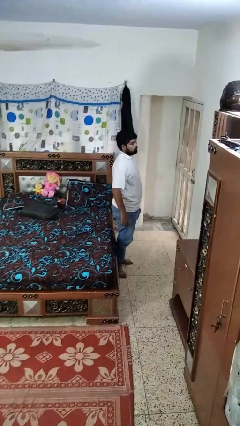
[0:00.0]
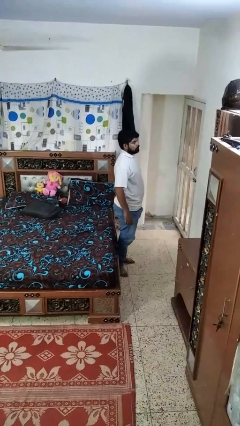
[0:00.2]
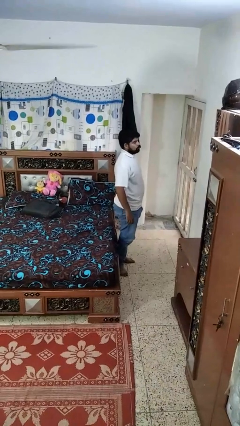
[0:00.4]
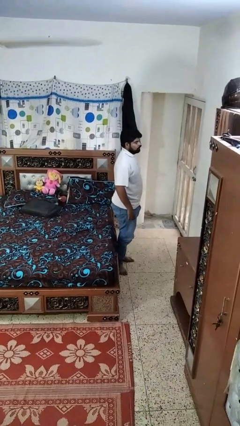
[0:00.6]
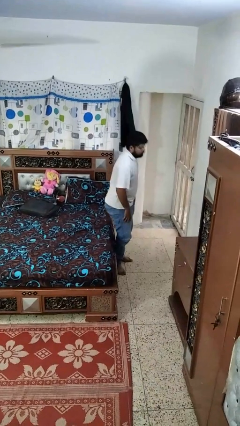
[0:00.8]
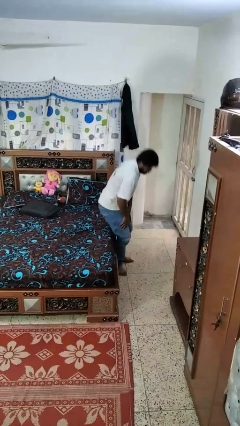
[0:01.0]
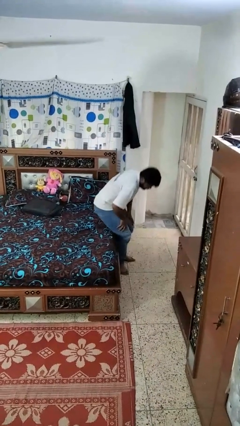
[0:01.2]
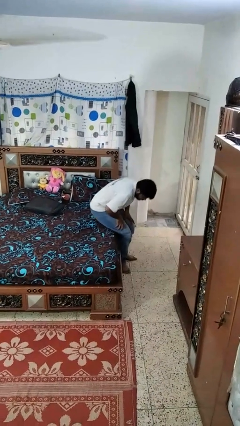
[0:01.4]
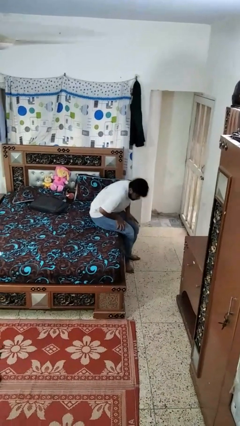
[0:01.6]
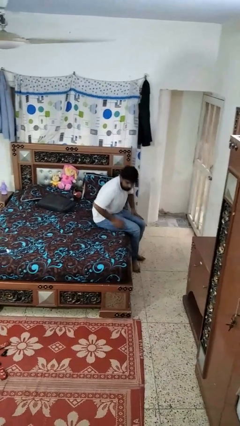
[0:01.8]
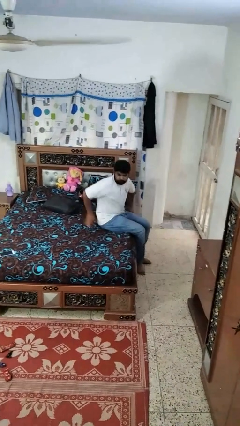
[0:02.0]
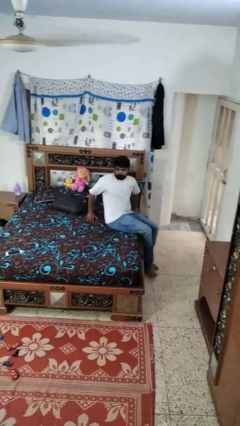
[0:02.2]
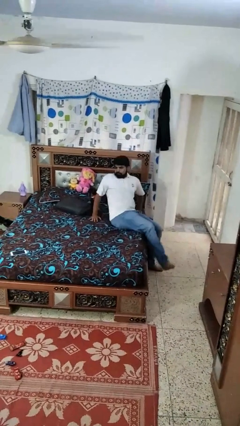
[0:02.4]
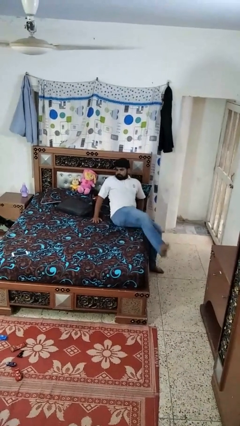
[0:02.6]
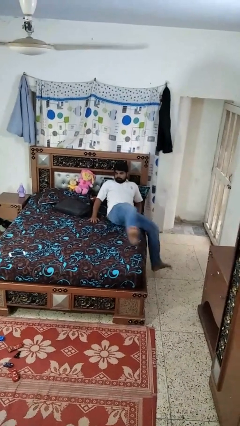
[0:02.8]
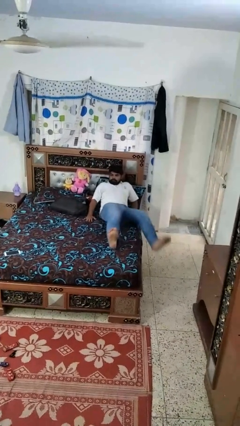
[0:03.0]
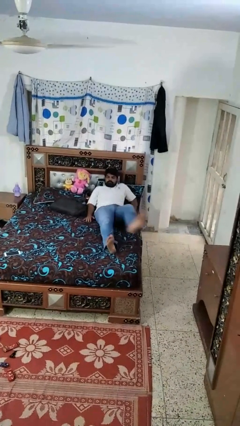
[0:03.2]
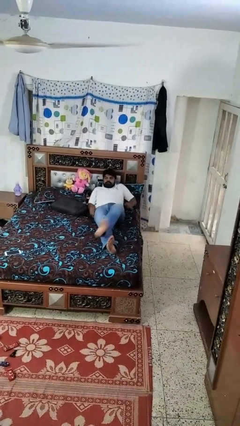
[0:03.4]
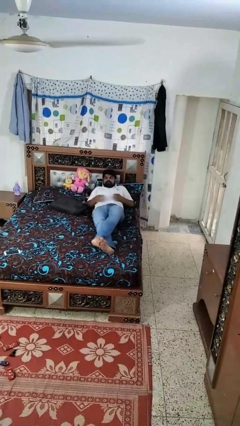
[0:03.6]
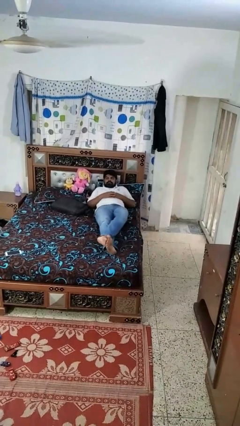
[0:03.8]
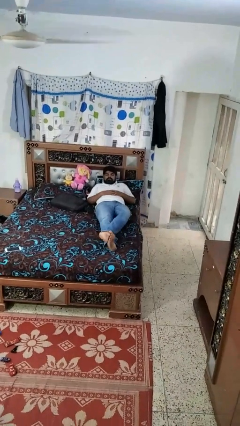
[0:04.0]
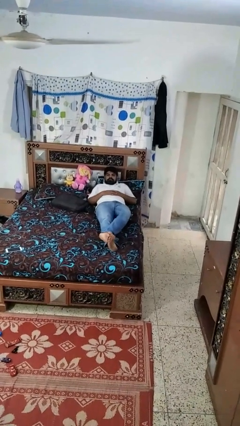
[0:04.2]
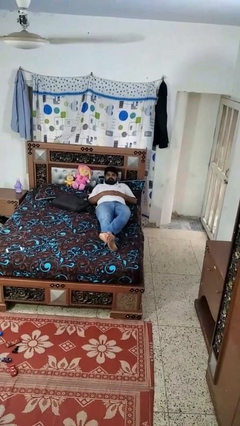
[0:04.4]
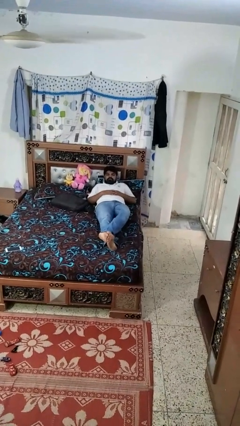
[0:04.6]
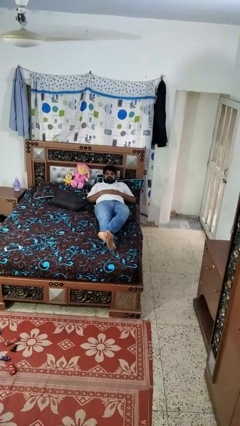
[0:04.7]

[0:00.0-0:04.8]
person lies down on bed

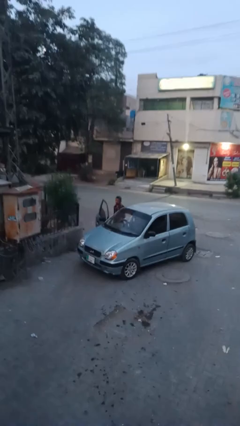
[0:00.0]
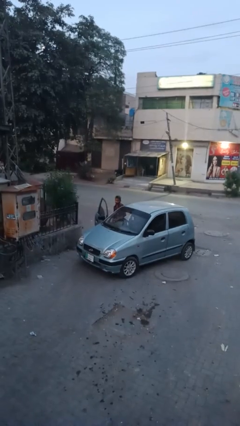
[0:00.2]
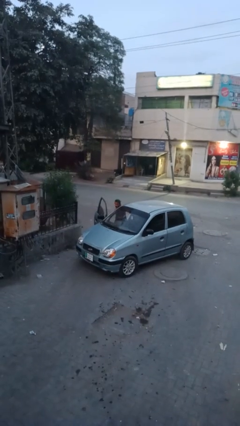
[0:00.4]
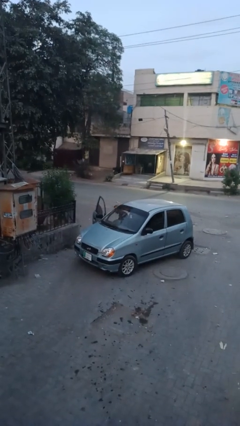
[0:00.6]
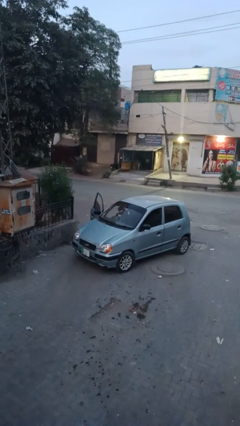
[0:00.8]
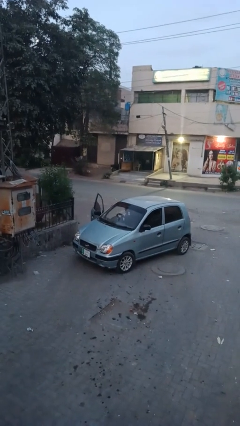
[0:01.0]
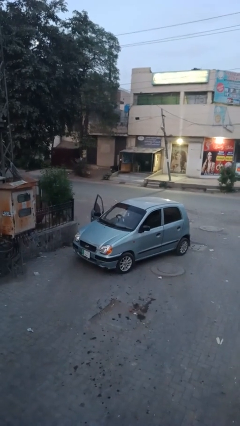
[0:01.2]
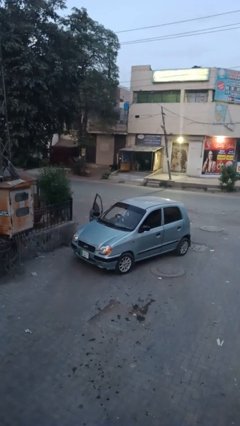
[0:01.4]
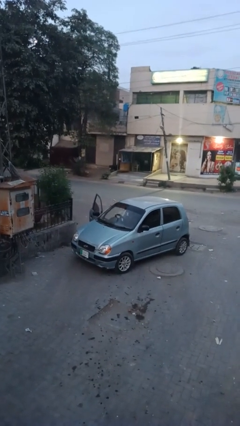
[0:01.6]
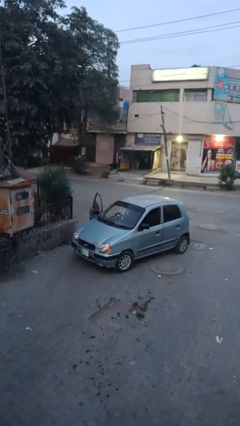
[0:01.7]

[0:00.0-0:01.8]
person enters car

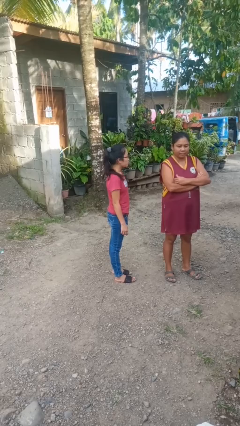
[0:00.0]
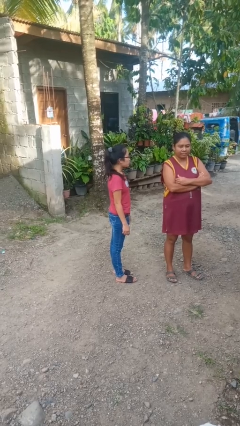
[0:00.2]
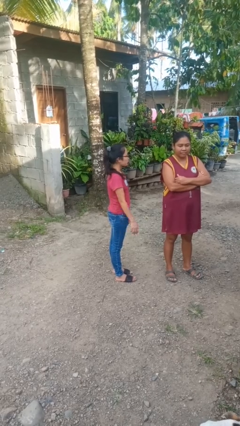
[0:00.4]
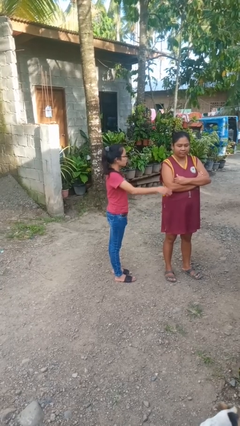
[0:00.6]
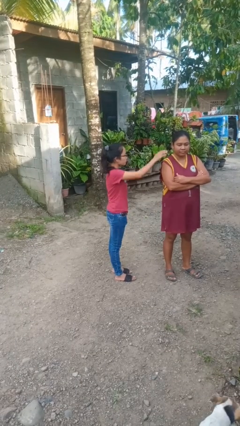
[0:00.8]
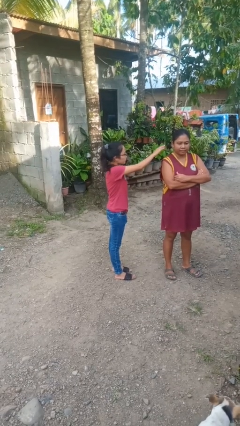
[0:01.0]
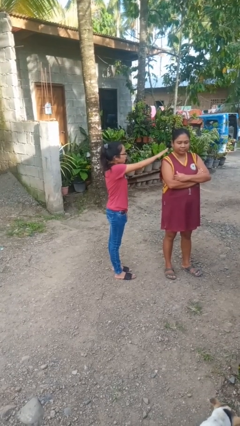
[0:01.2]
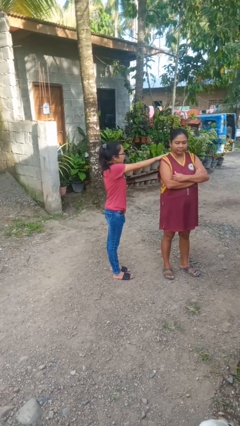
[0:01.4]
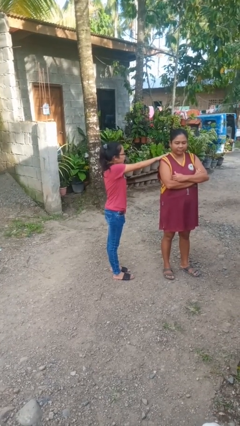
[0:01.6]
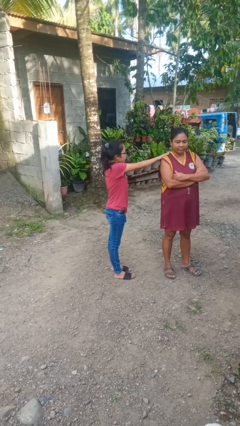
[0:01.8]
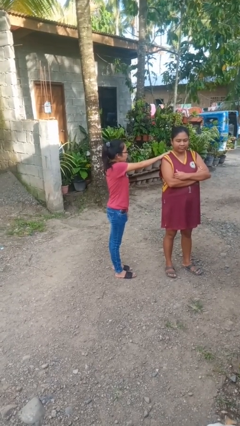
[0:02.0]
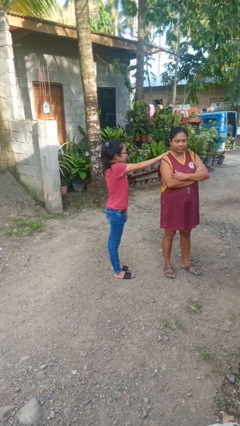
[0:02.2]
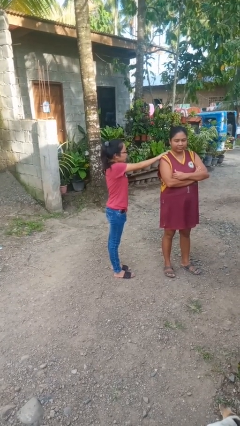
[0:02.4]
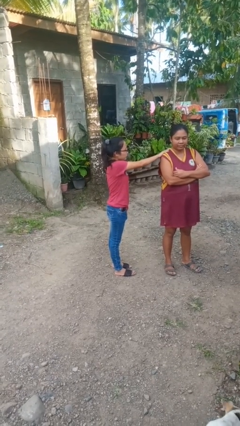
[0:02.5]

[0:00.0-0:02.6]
person pounds shoulders of person

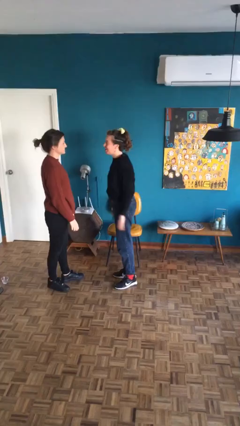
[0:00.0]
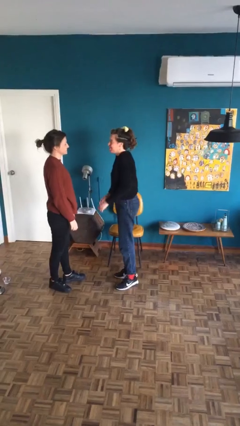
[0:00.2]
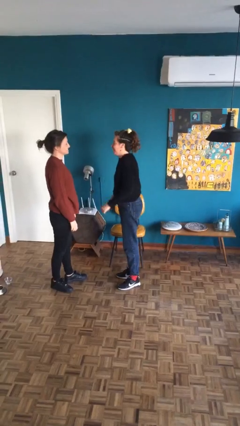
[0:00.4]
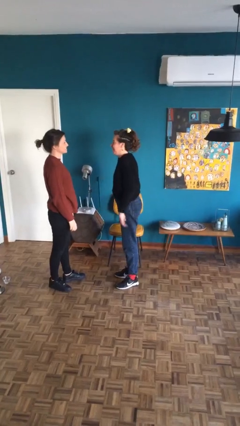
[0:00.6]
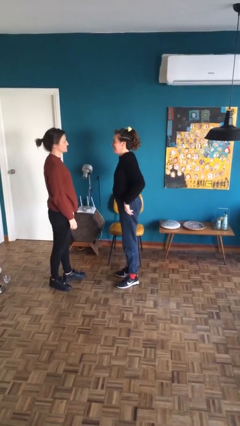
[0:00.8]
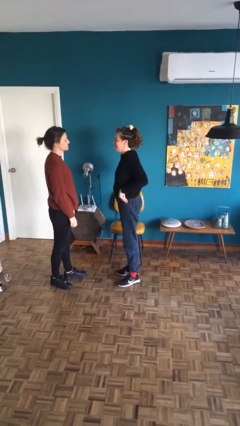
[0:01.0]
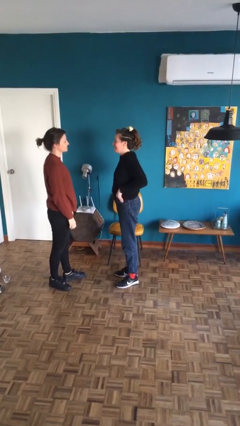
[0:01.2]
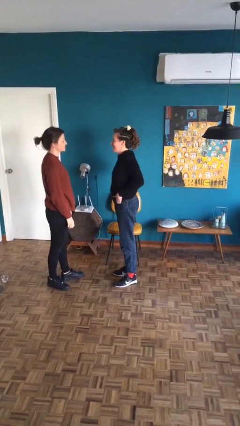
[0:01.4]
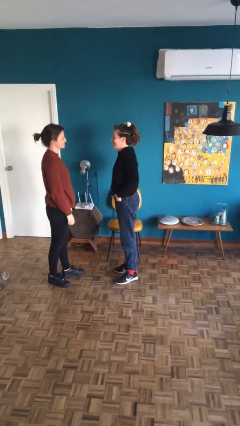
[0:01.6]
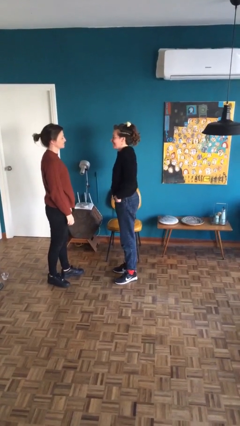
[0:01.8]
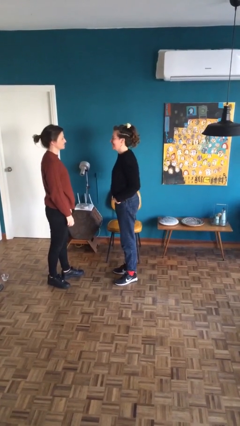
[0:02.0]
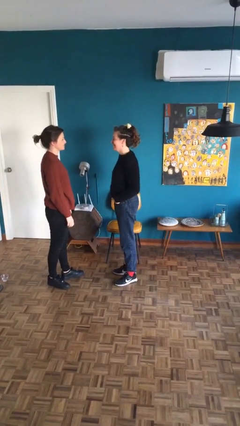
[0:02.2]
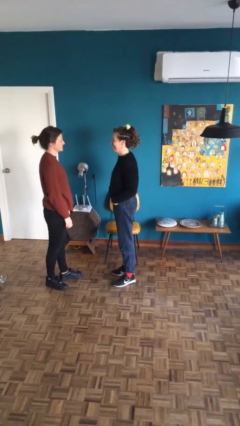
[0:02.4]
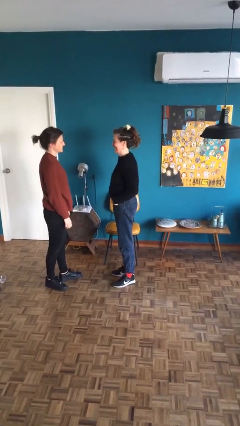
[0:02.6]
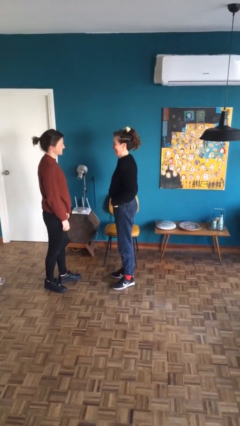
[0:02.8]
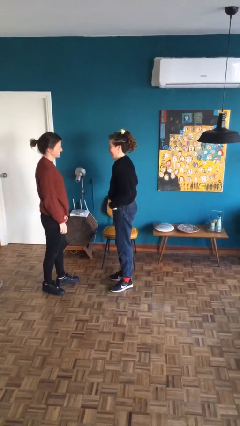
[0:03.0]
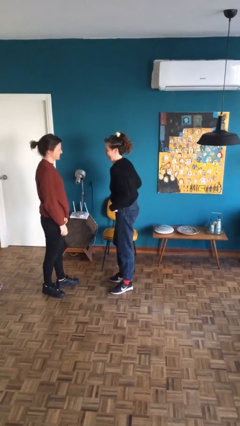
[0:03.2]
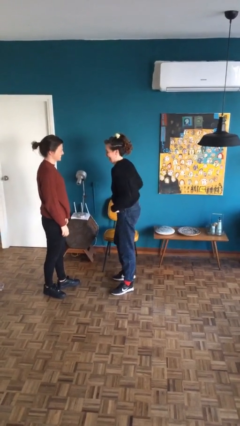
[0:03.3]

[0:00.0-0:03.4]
person talks to person

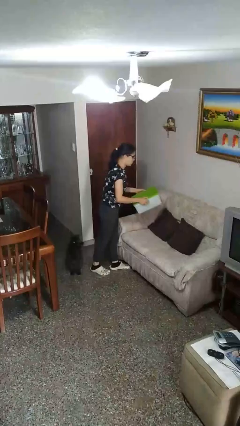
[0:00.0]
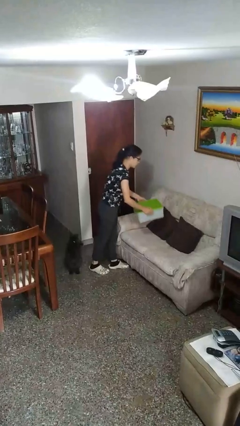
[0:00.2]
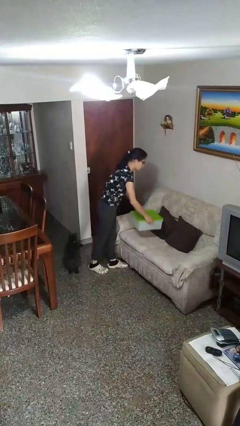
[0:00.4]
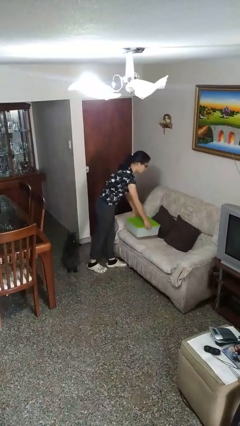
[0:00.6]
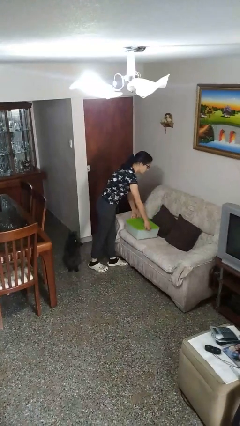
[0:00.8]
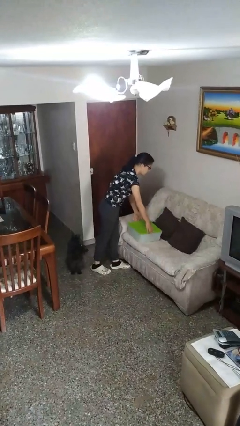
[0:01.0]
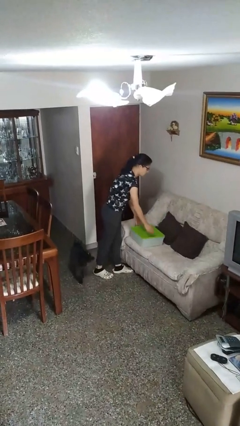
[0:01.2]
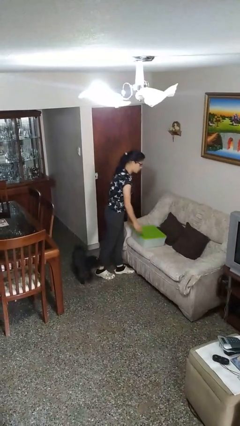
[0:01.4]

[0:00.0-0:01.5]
person puts down object on couch

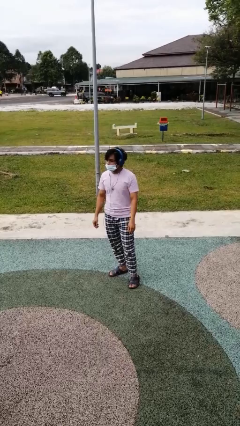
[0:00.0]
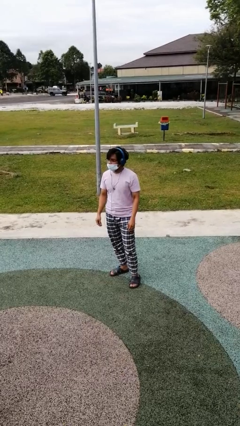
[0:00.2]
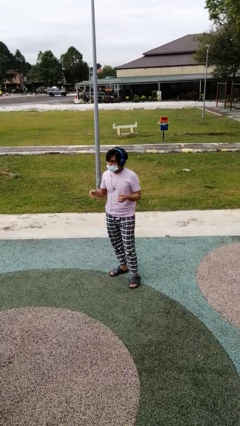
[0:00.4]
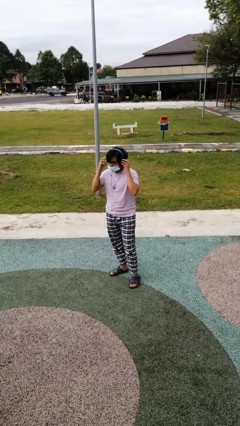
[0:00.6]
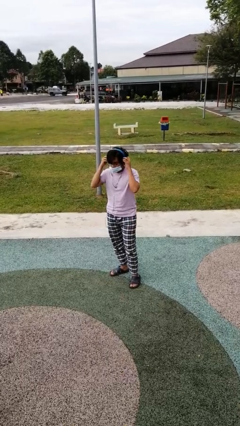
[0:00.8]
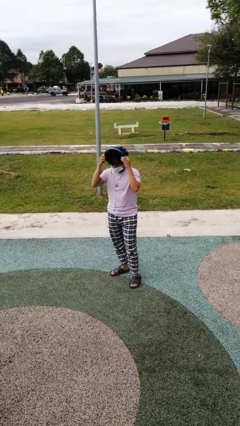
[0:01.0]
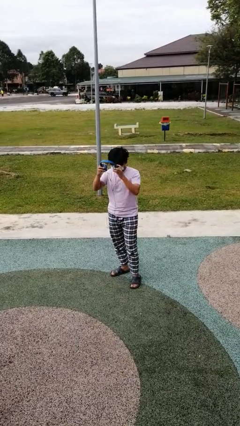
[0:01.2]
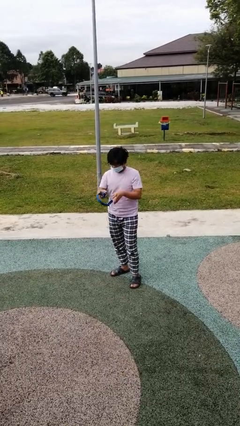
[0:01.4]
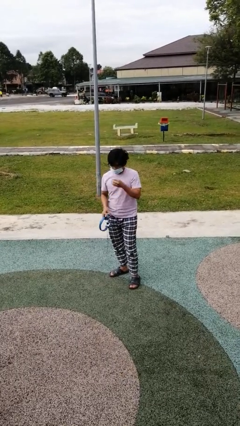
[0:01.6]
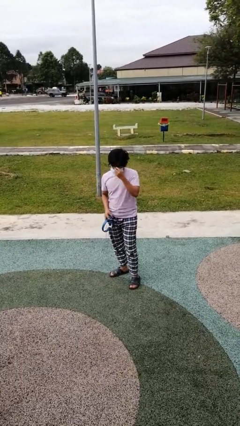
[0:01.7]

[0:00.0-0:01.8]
person takes off headphones

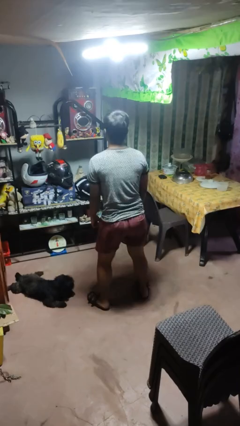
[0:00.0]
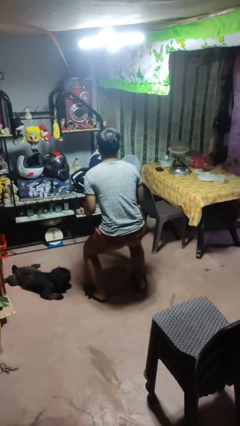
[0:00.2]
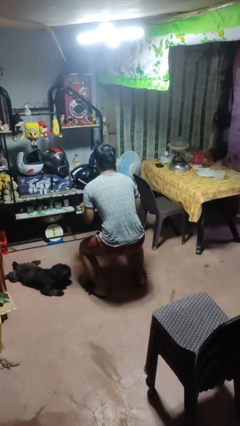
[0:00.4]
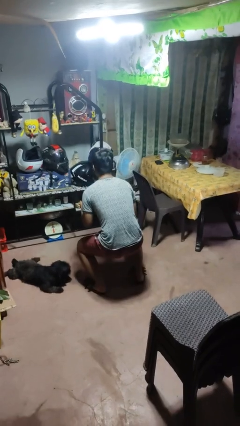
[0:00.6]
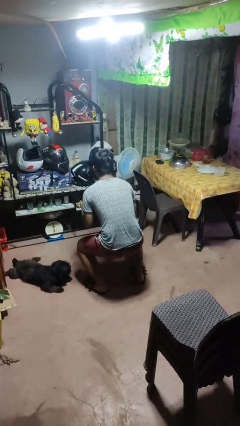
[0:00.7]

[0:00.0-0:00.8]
person squats

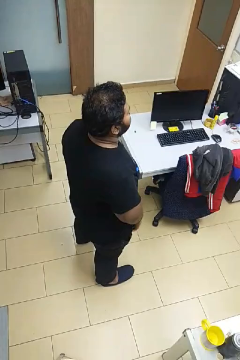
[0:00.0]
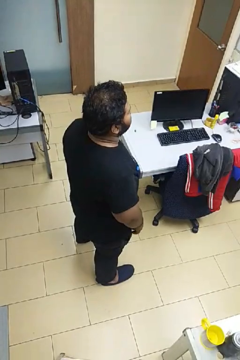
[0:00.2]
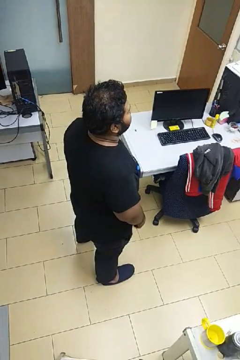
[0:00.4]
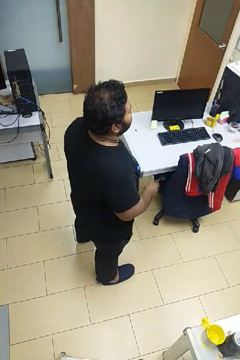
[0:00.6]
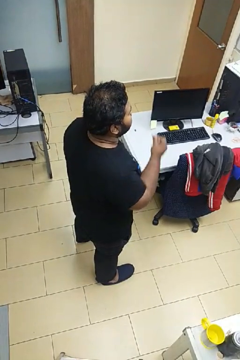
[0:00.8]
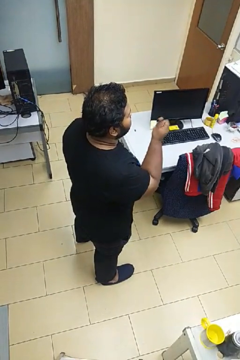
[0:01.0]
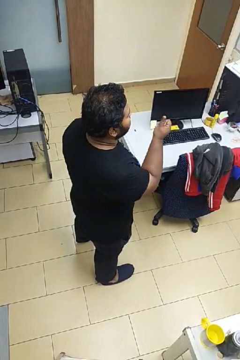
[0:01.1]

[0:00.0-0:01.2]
person snaps fingers
